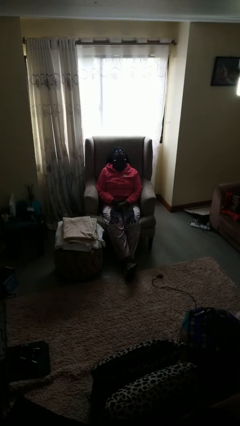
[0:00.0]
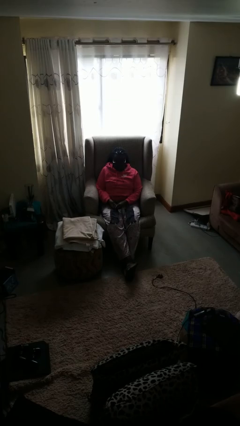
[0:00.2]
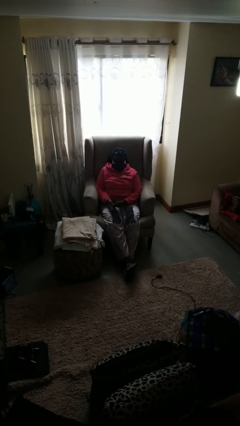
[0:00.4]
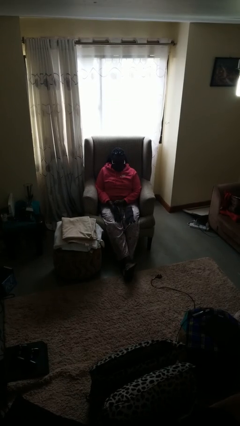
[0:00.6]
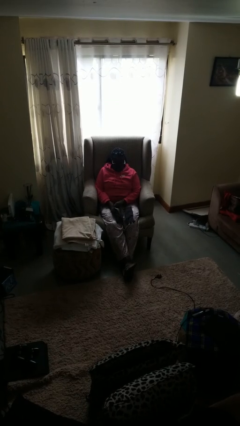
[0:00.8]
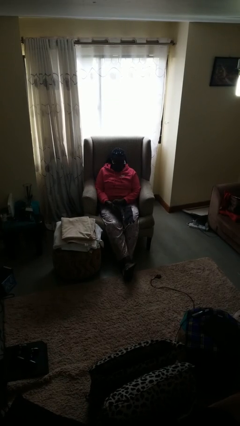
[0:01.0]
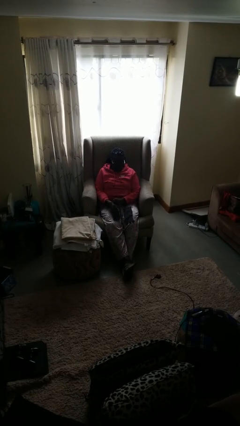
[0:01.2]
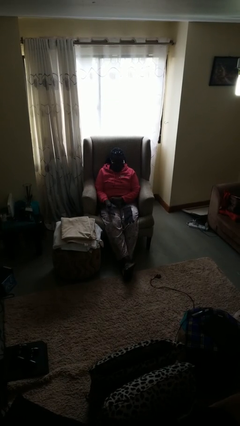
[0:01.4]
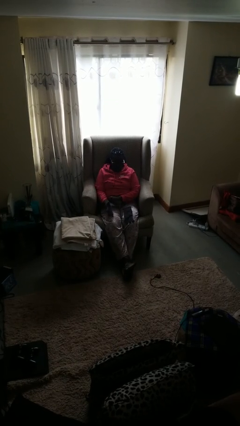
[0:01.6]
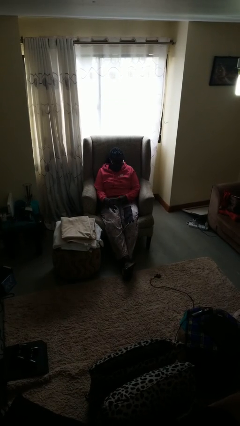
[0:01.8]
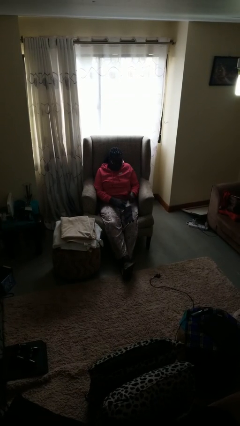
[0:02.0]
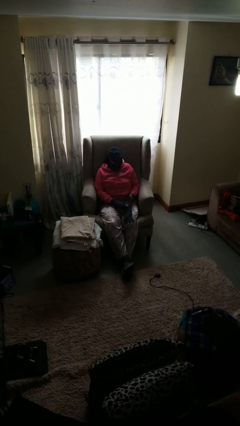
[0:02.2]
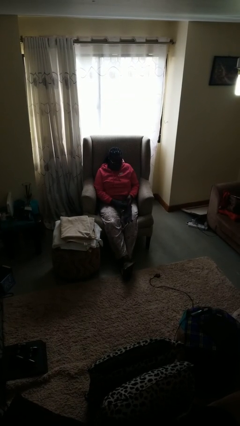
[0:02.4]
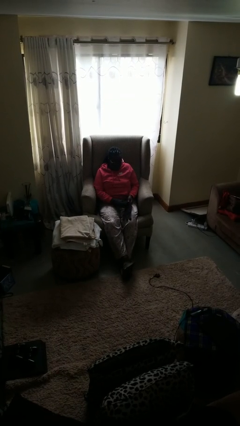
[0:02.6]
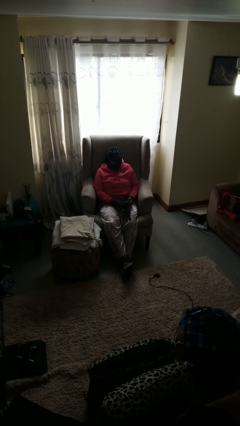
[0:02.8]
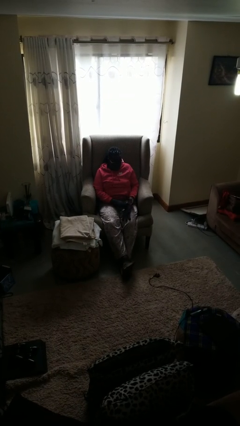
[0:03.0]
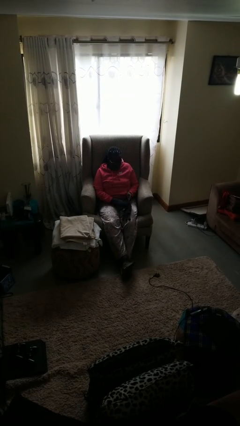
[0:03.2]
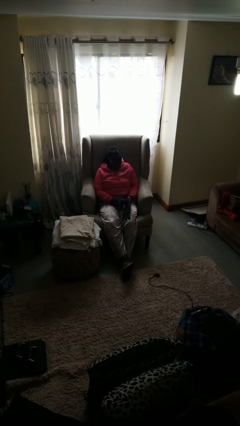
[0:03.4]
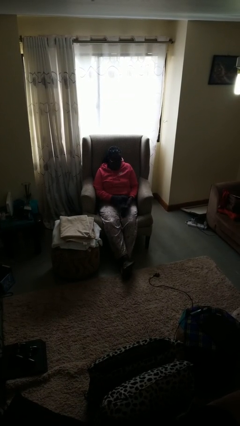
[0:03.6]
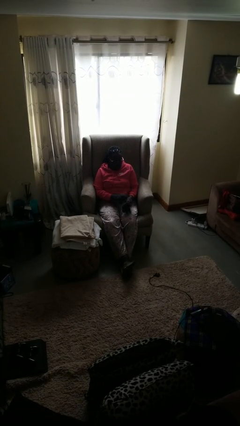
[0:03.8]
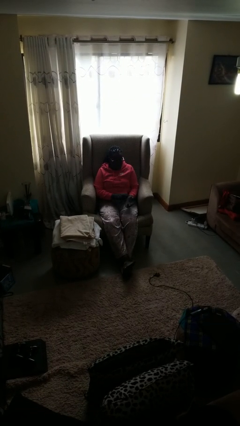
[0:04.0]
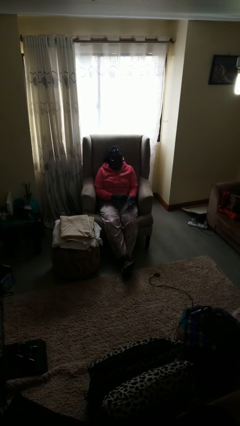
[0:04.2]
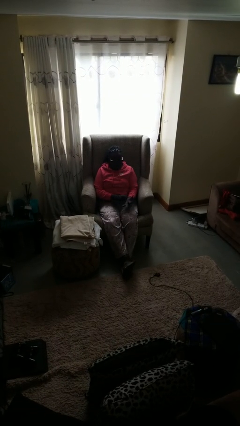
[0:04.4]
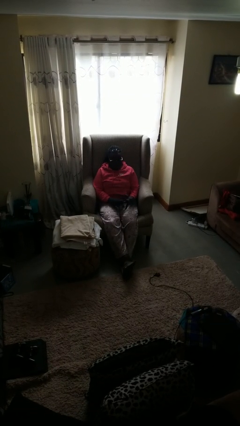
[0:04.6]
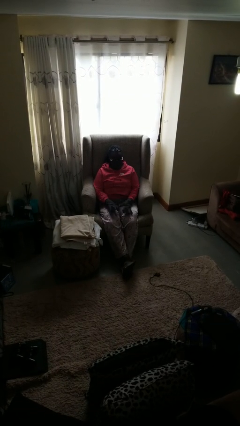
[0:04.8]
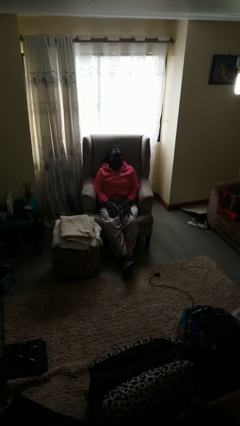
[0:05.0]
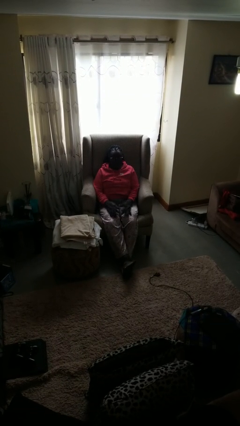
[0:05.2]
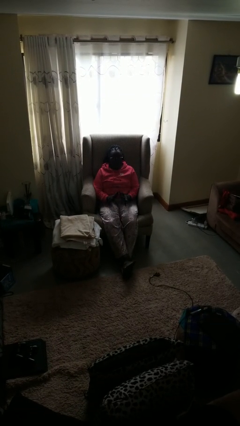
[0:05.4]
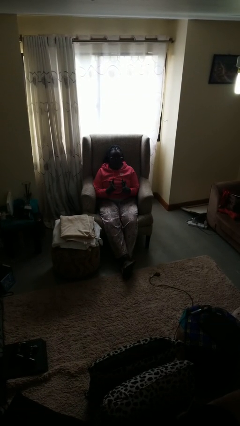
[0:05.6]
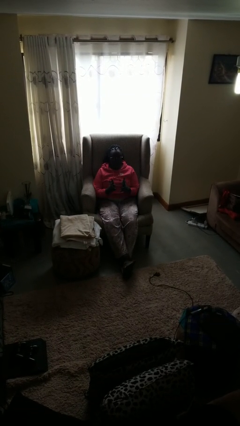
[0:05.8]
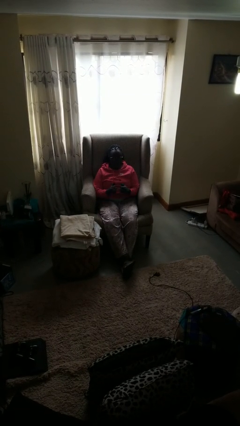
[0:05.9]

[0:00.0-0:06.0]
person puts on gloves

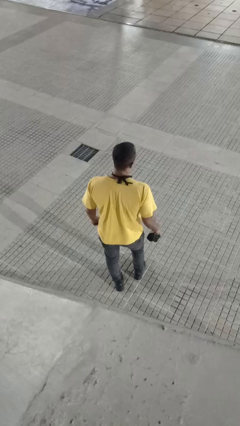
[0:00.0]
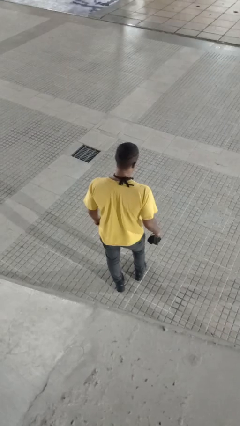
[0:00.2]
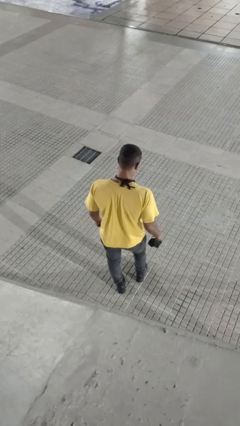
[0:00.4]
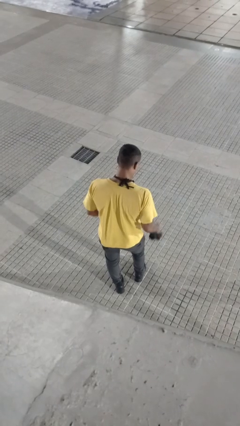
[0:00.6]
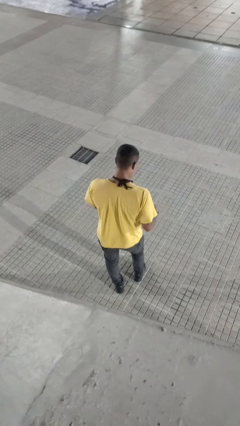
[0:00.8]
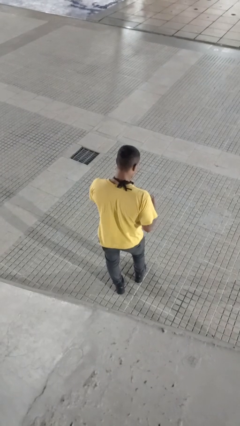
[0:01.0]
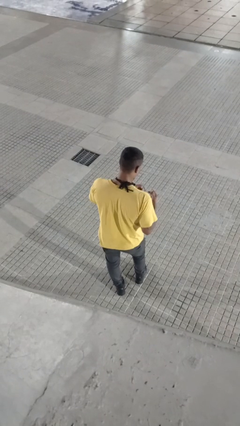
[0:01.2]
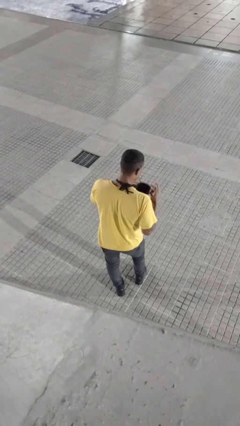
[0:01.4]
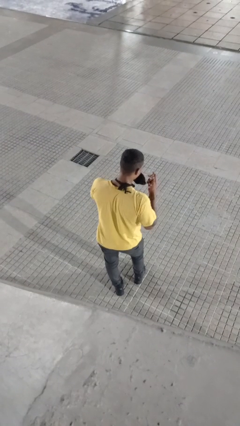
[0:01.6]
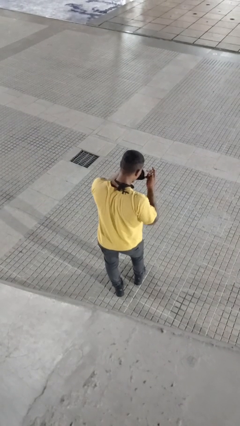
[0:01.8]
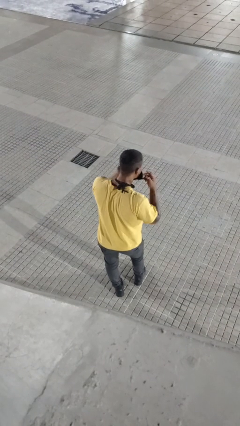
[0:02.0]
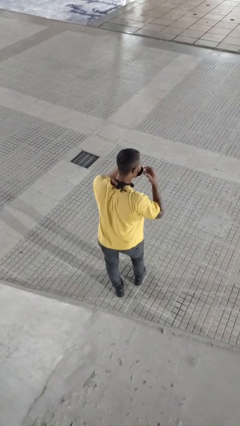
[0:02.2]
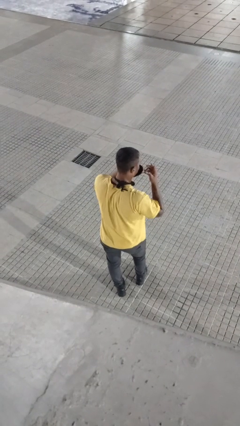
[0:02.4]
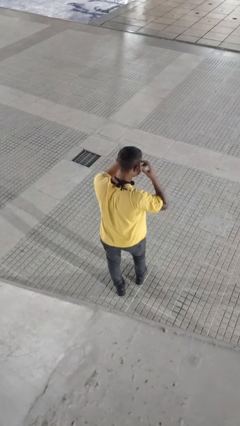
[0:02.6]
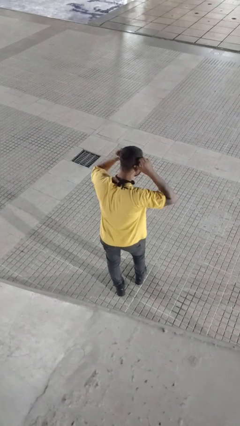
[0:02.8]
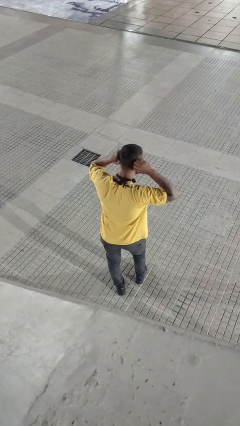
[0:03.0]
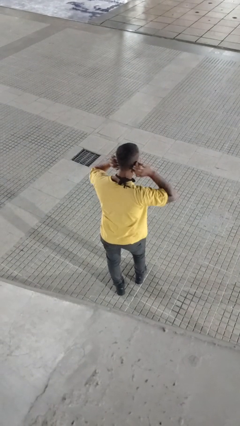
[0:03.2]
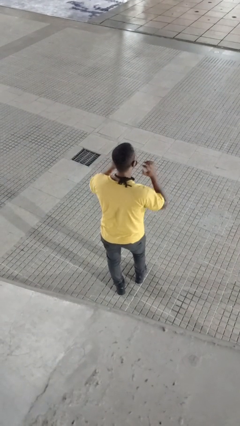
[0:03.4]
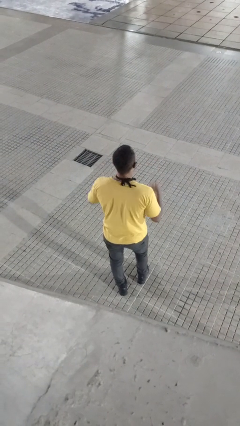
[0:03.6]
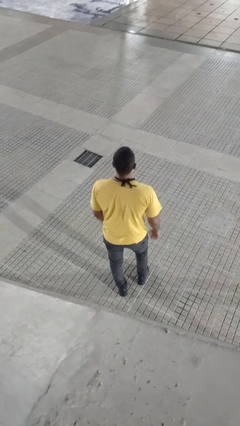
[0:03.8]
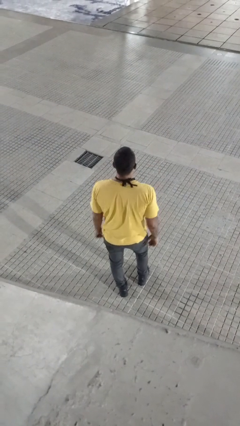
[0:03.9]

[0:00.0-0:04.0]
person puts on facemask

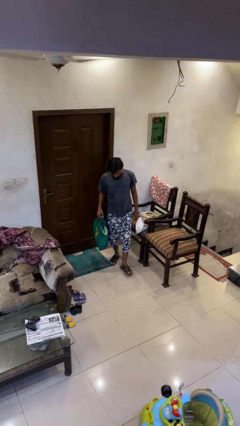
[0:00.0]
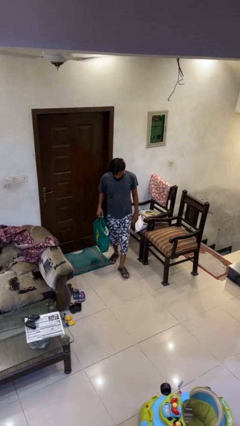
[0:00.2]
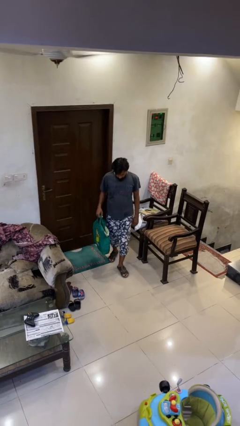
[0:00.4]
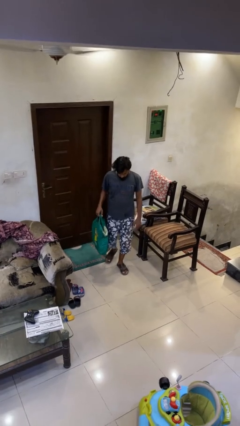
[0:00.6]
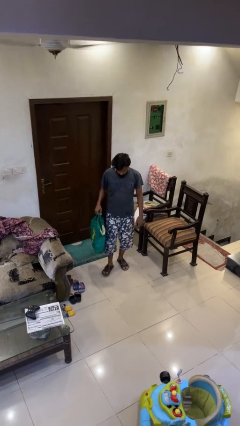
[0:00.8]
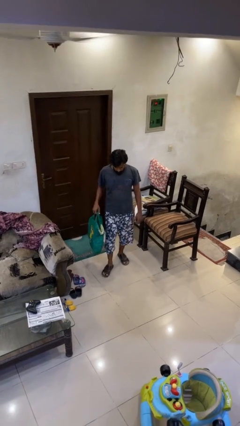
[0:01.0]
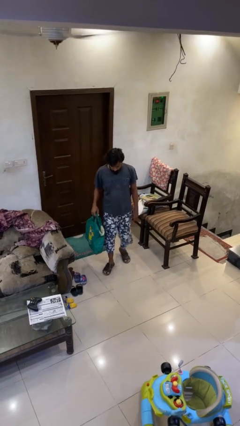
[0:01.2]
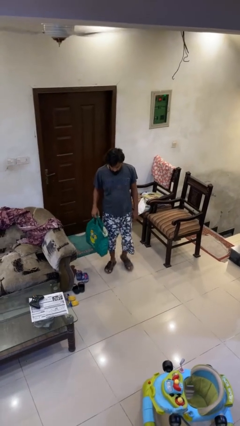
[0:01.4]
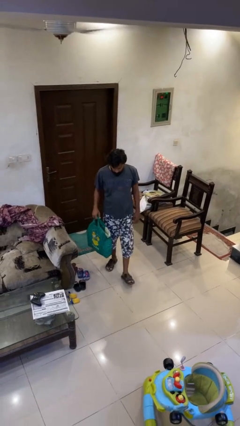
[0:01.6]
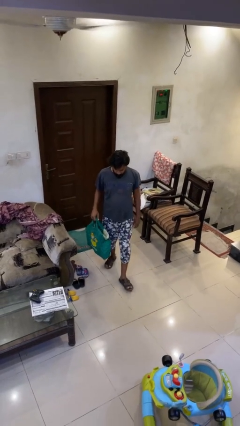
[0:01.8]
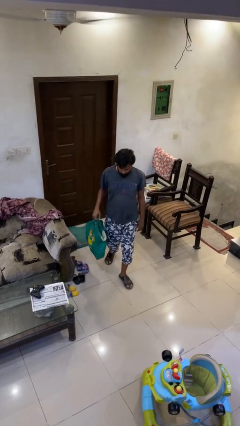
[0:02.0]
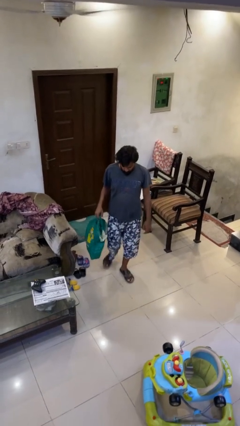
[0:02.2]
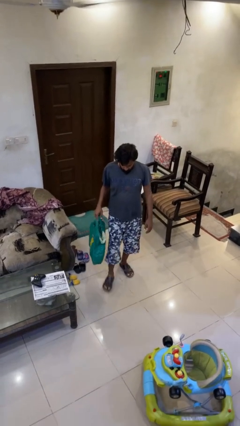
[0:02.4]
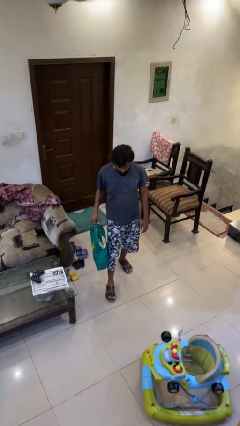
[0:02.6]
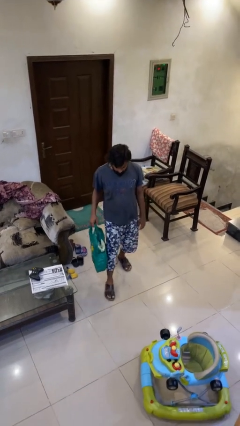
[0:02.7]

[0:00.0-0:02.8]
person carries groceries

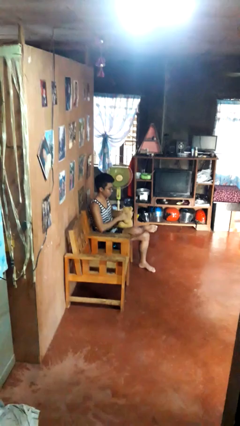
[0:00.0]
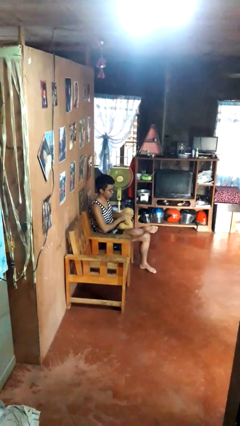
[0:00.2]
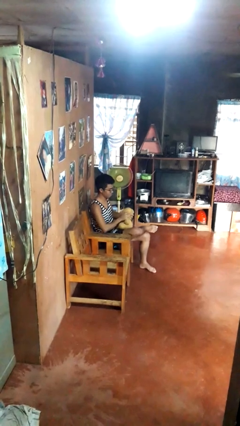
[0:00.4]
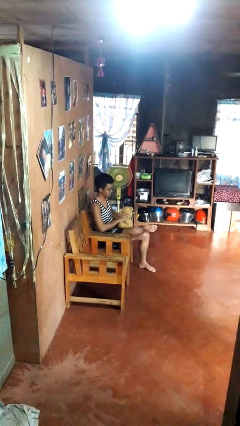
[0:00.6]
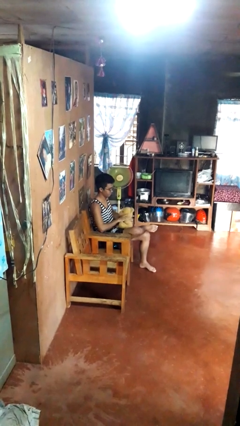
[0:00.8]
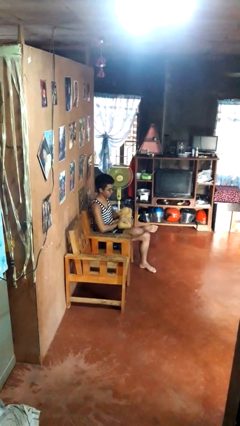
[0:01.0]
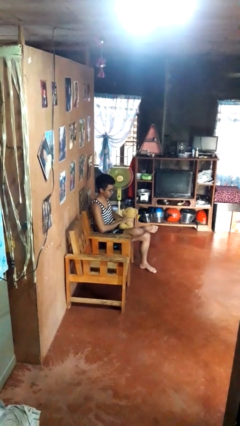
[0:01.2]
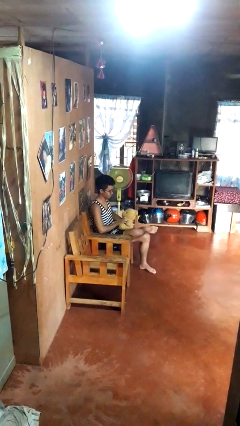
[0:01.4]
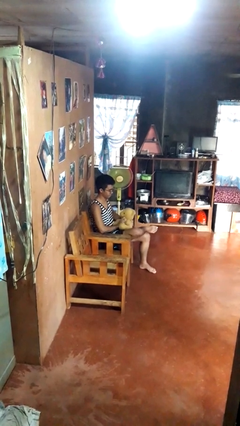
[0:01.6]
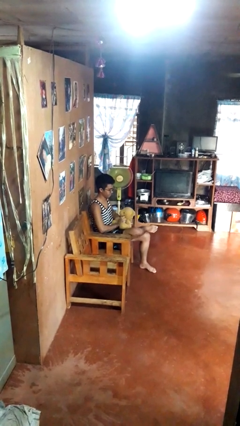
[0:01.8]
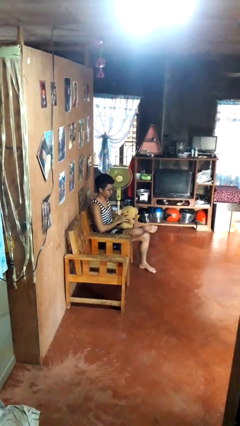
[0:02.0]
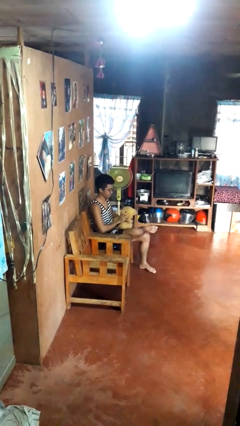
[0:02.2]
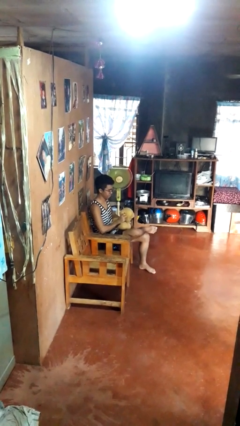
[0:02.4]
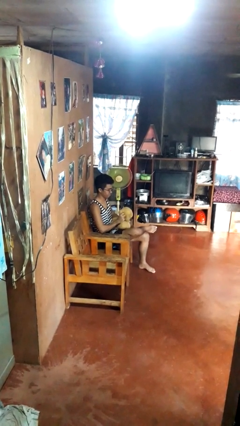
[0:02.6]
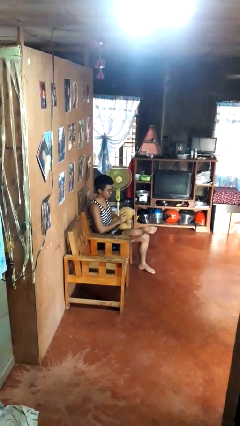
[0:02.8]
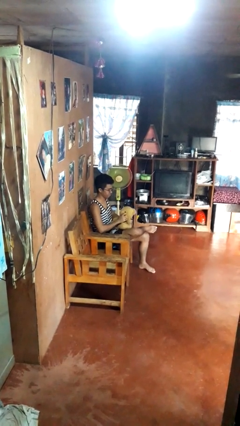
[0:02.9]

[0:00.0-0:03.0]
person squeezes object

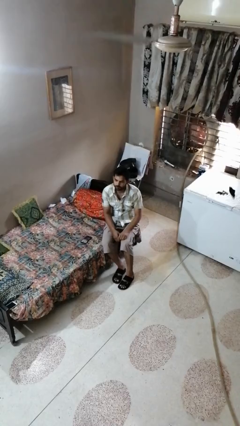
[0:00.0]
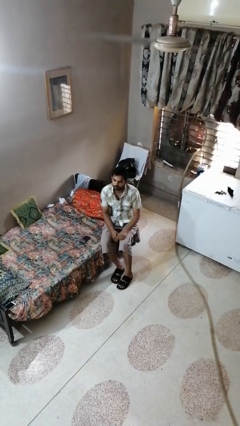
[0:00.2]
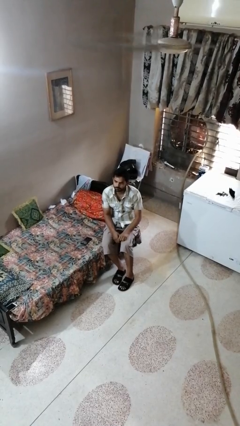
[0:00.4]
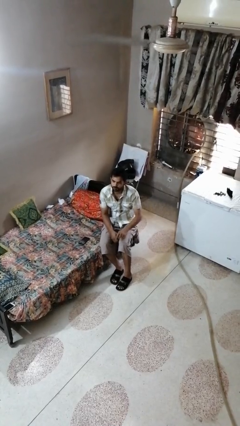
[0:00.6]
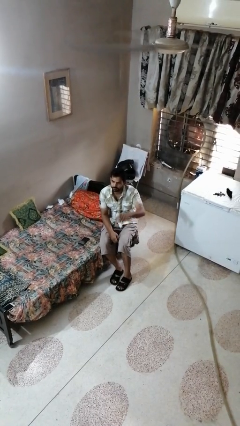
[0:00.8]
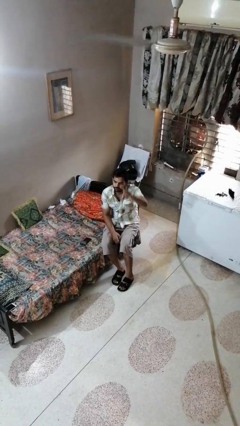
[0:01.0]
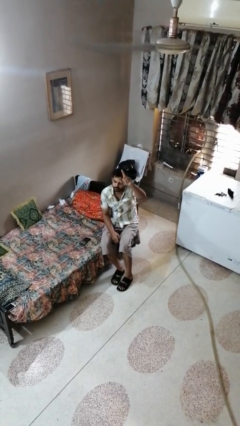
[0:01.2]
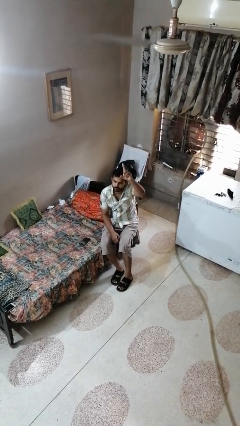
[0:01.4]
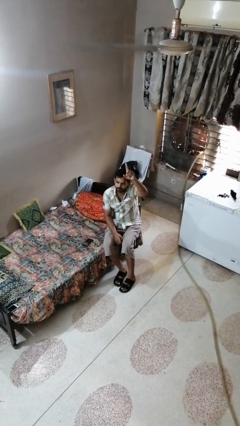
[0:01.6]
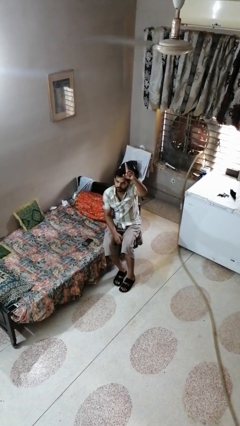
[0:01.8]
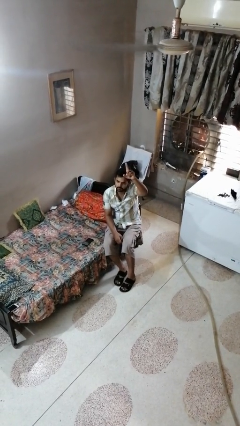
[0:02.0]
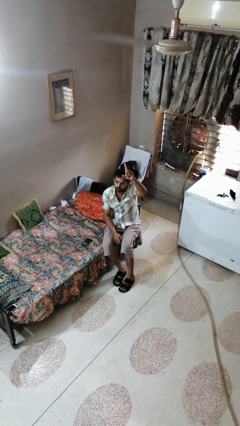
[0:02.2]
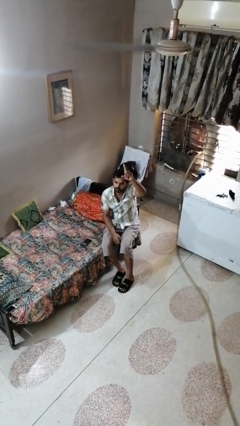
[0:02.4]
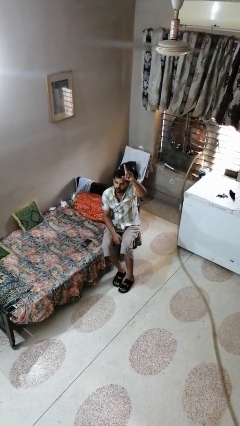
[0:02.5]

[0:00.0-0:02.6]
person gestures raise hand
